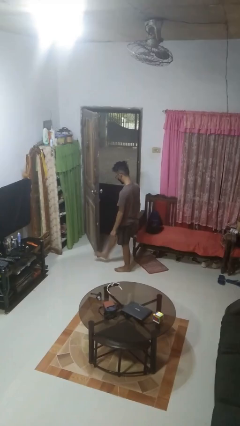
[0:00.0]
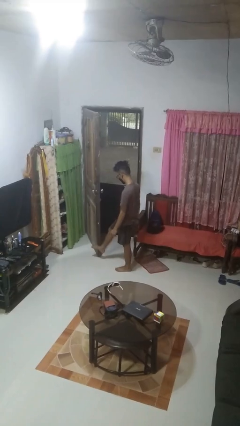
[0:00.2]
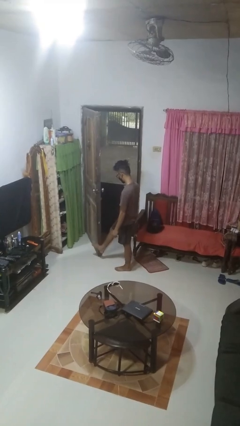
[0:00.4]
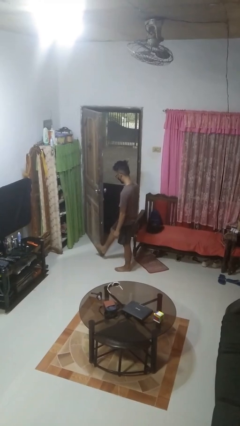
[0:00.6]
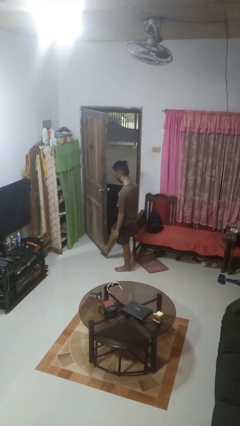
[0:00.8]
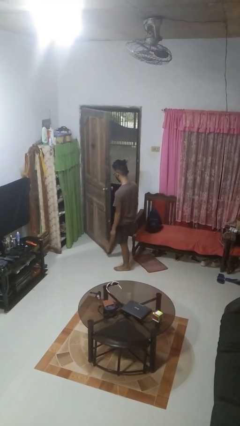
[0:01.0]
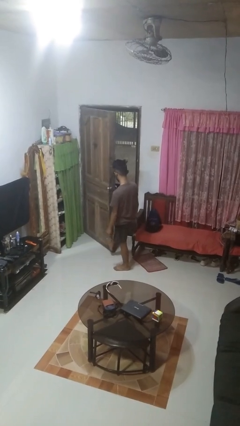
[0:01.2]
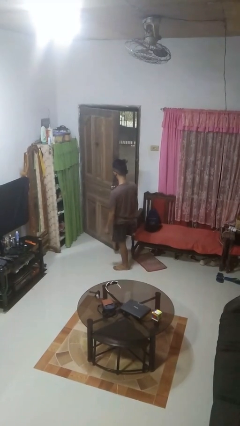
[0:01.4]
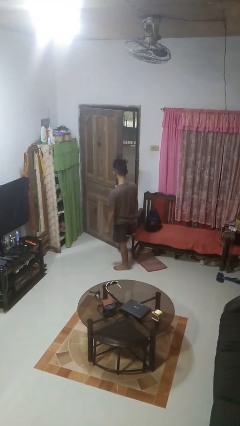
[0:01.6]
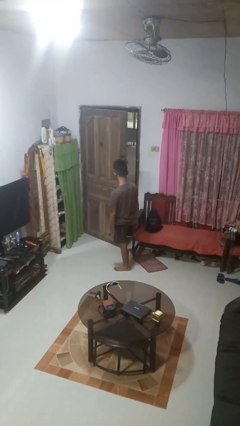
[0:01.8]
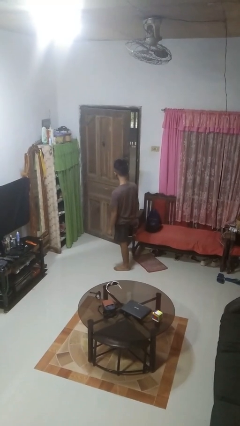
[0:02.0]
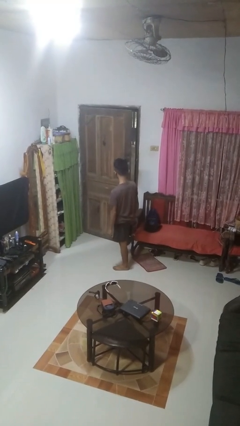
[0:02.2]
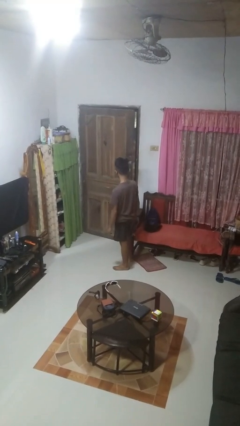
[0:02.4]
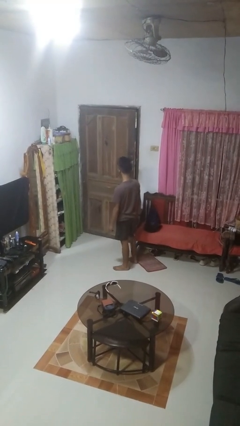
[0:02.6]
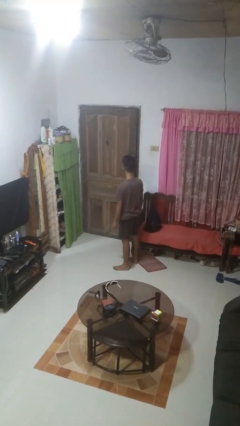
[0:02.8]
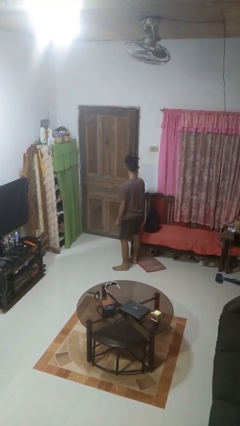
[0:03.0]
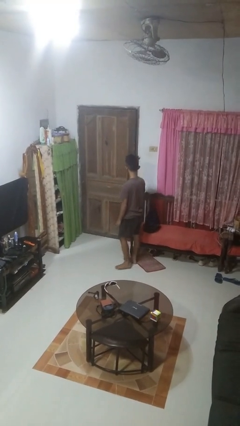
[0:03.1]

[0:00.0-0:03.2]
person closes door with foot

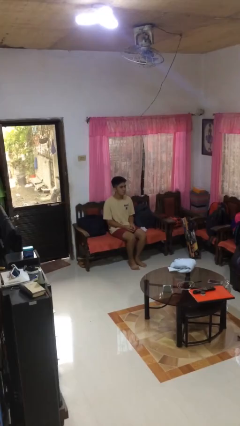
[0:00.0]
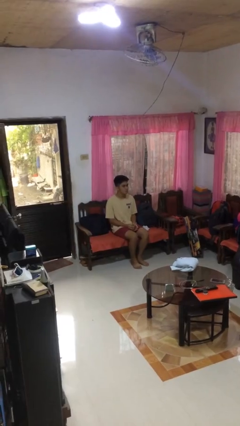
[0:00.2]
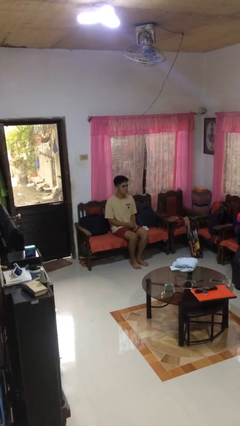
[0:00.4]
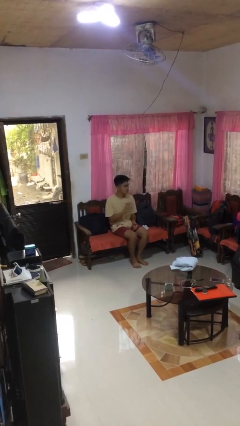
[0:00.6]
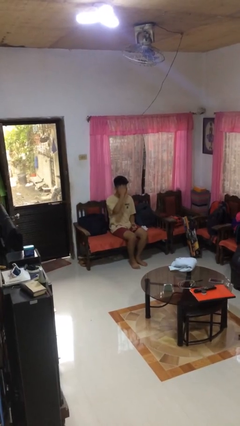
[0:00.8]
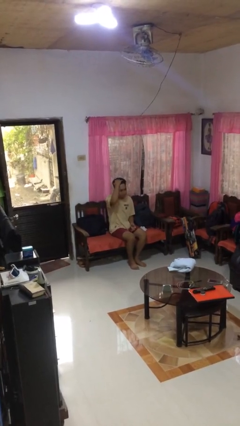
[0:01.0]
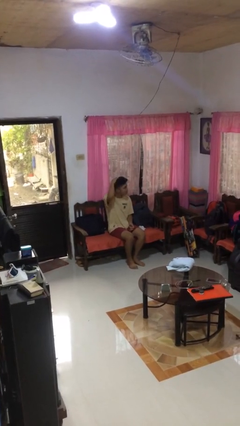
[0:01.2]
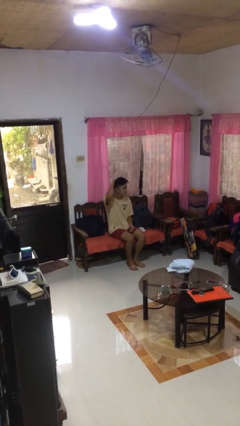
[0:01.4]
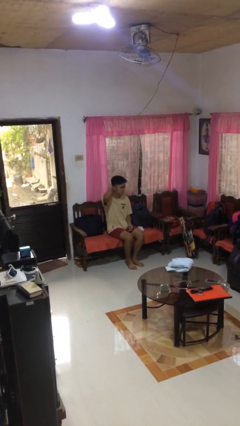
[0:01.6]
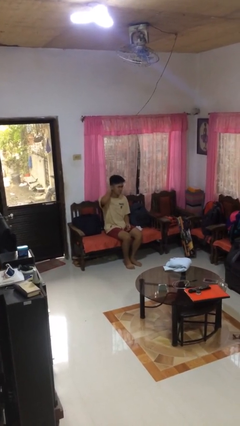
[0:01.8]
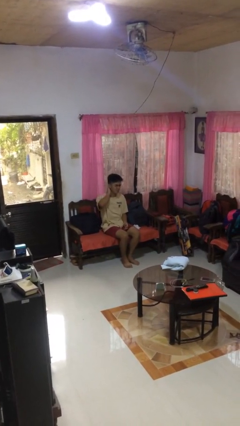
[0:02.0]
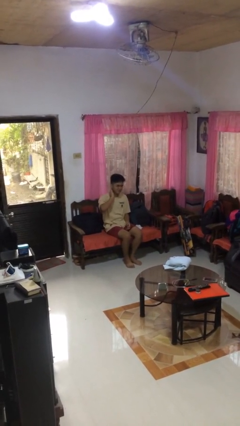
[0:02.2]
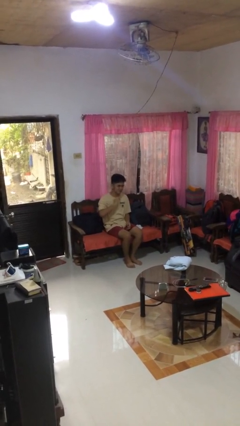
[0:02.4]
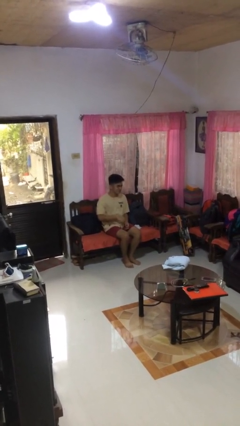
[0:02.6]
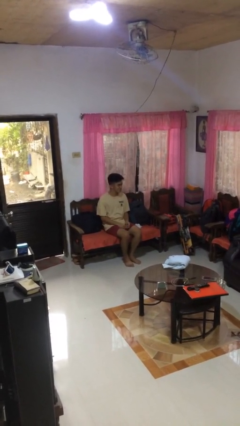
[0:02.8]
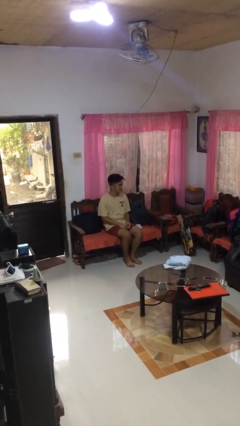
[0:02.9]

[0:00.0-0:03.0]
person strokes hair

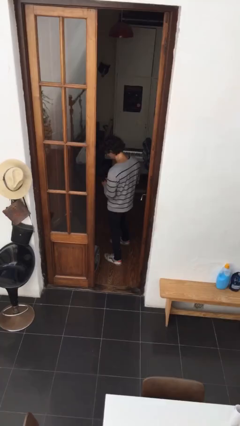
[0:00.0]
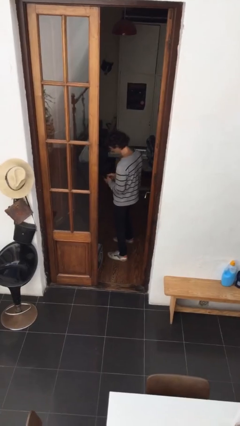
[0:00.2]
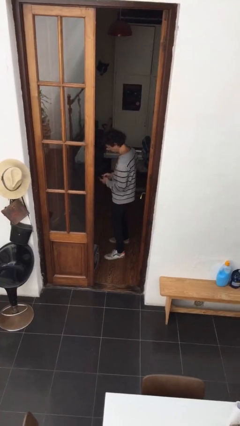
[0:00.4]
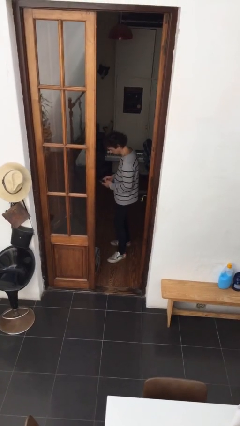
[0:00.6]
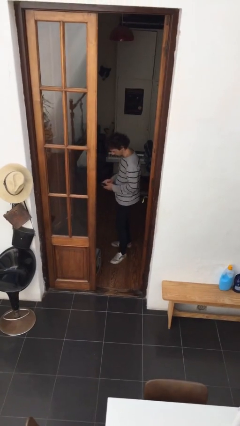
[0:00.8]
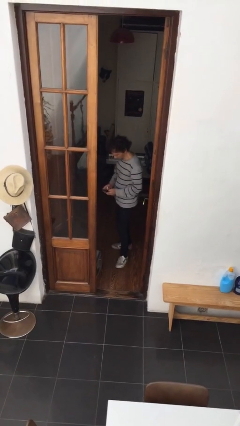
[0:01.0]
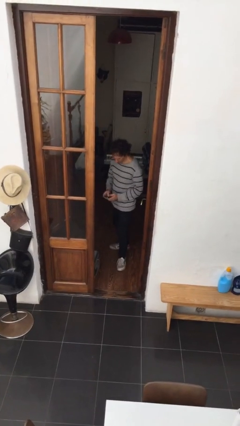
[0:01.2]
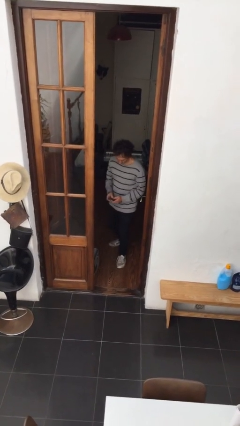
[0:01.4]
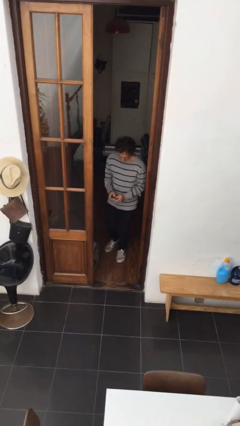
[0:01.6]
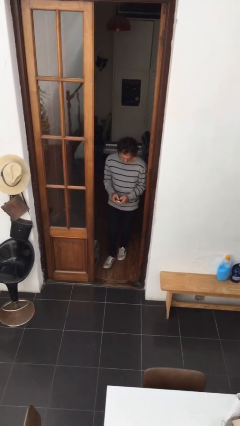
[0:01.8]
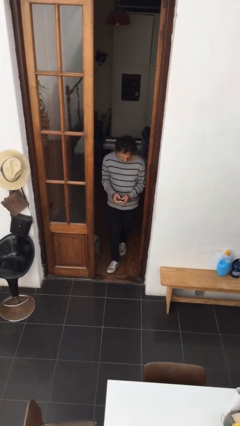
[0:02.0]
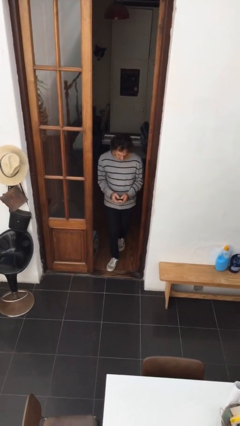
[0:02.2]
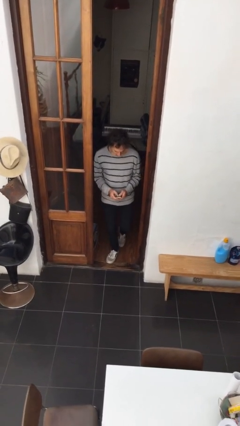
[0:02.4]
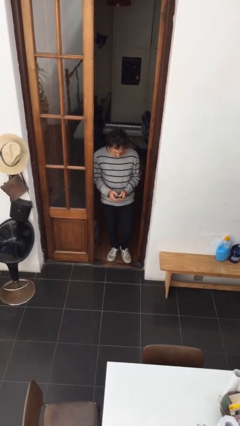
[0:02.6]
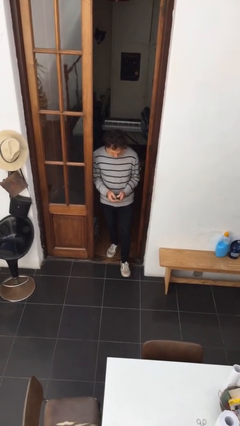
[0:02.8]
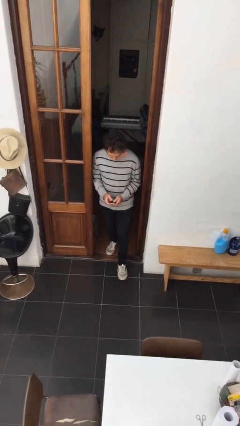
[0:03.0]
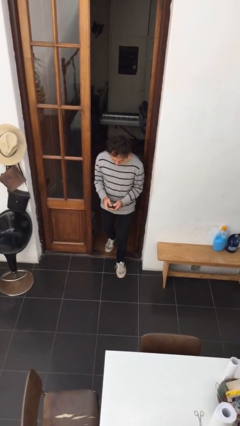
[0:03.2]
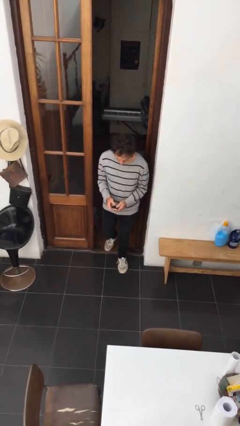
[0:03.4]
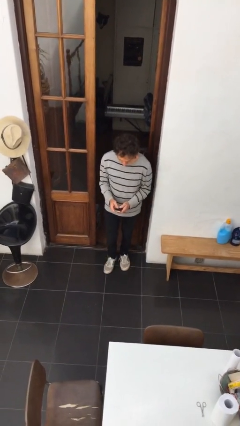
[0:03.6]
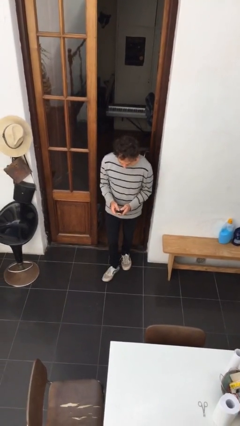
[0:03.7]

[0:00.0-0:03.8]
person enters scene through structure

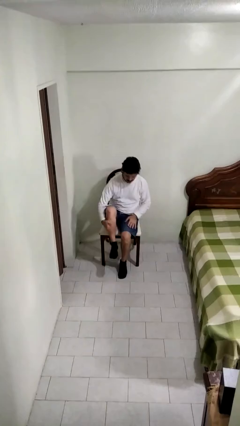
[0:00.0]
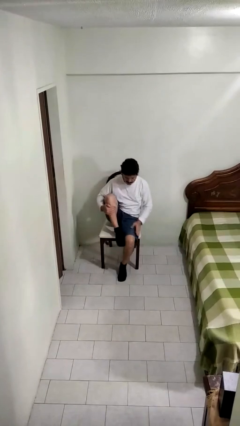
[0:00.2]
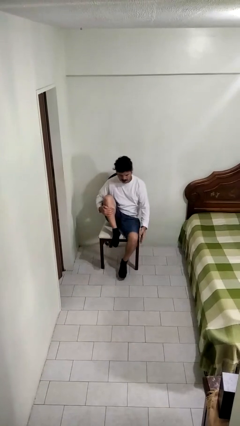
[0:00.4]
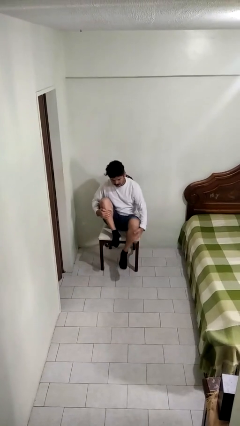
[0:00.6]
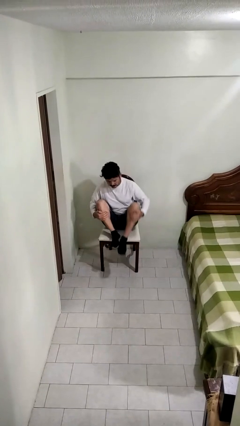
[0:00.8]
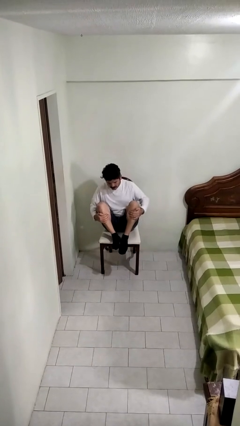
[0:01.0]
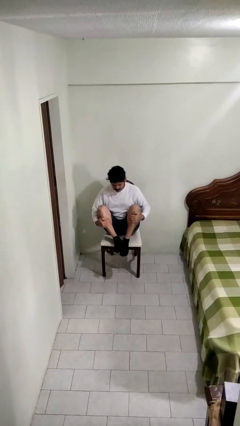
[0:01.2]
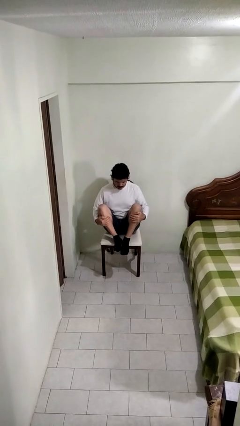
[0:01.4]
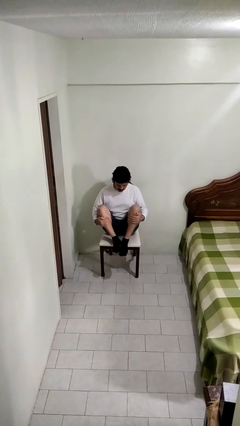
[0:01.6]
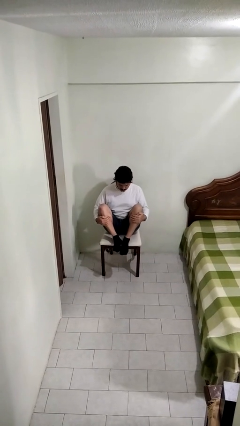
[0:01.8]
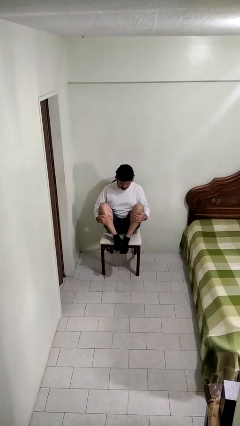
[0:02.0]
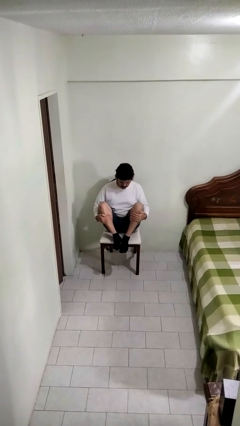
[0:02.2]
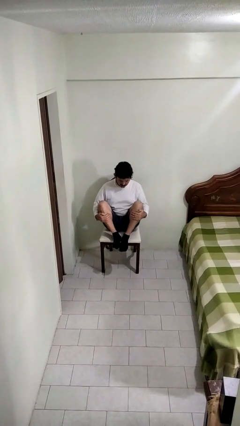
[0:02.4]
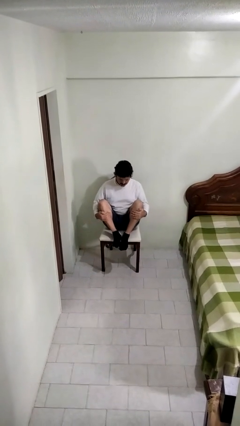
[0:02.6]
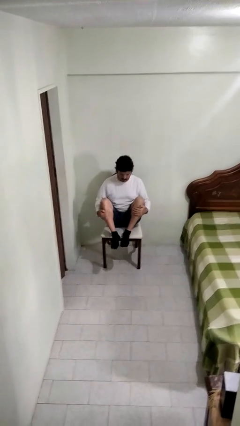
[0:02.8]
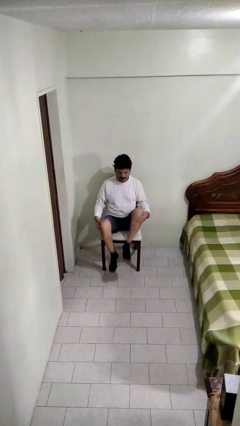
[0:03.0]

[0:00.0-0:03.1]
person puts feet up

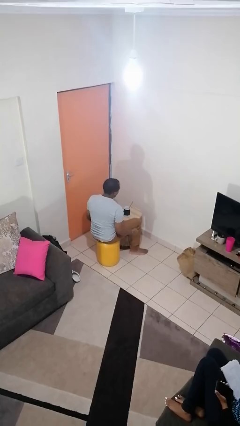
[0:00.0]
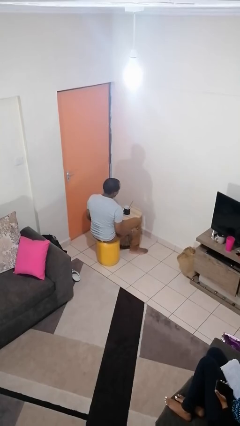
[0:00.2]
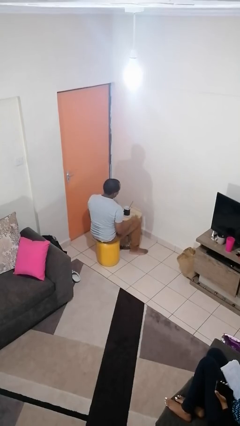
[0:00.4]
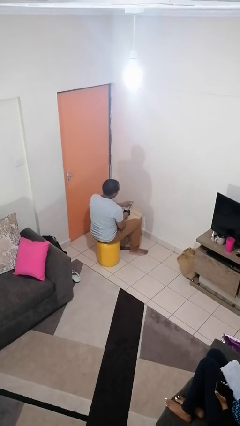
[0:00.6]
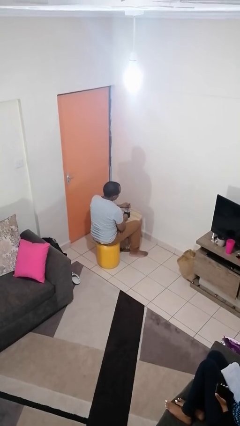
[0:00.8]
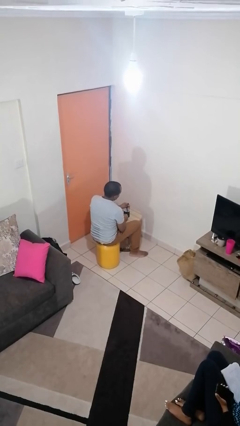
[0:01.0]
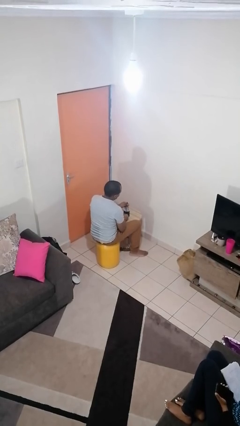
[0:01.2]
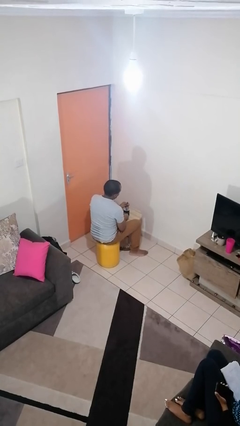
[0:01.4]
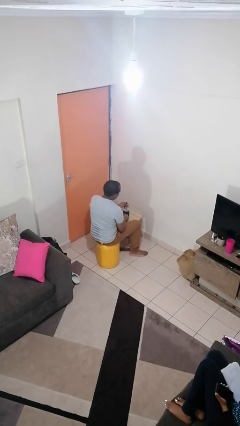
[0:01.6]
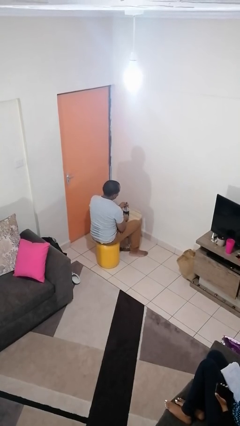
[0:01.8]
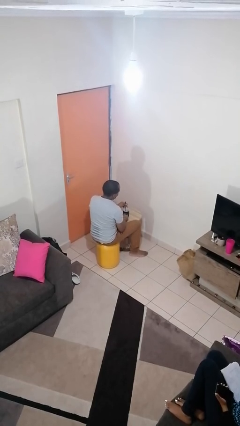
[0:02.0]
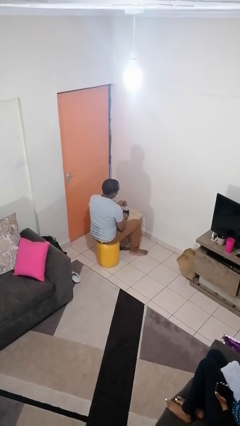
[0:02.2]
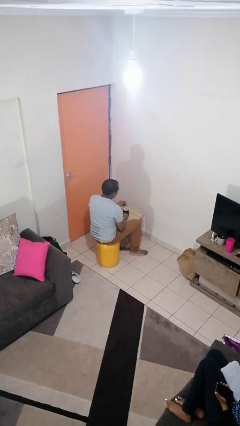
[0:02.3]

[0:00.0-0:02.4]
person stirs mug

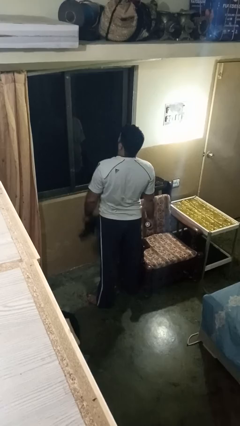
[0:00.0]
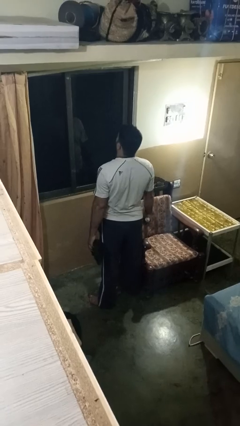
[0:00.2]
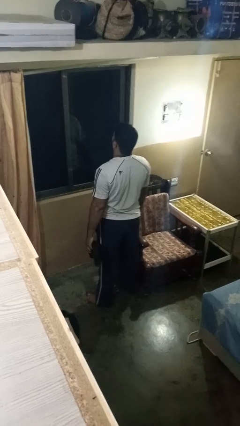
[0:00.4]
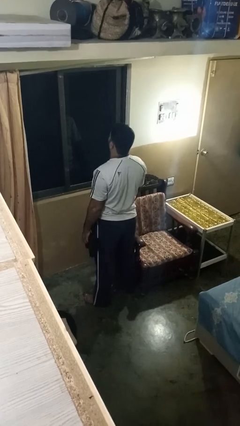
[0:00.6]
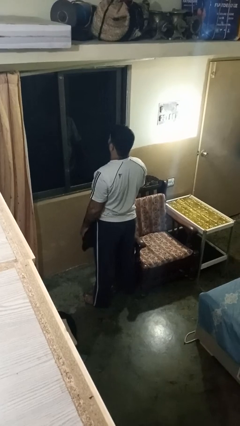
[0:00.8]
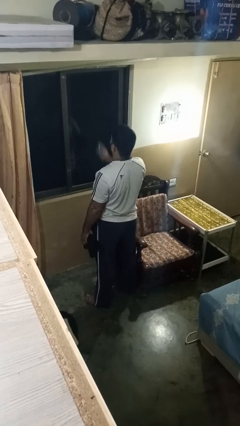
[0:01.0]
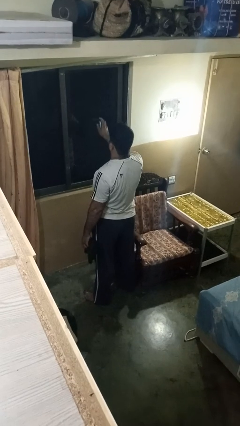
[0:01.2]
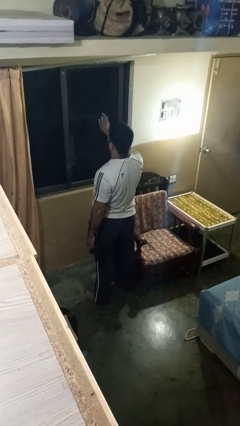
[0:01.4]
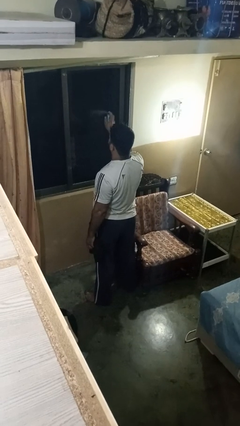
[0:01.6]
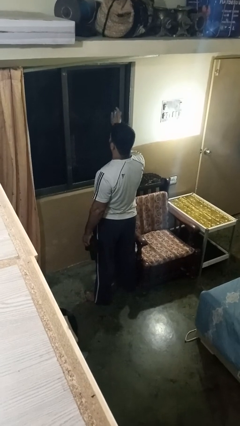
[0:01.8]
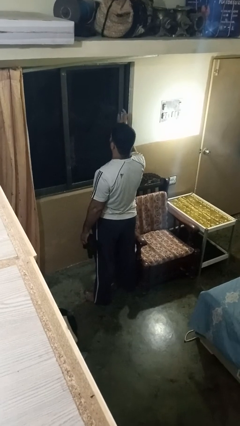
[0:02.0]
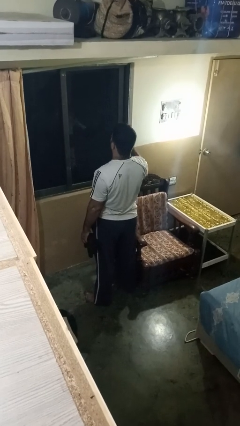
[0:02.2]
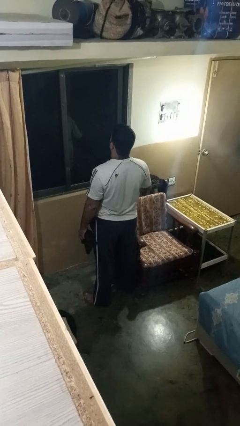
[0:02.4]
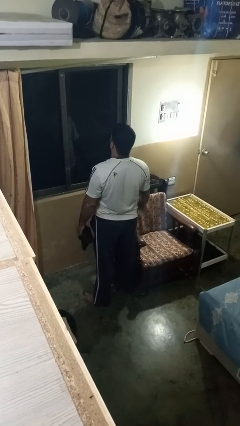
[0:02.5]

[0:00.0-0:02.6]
person sprays from bottle
